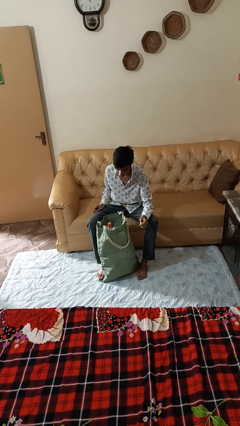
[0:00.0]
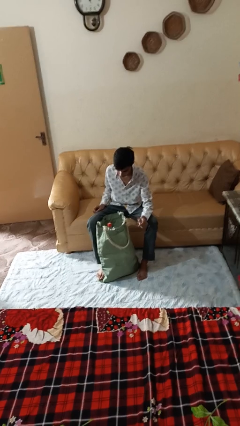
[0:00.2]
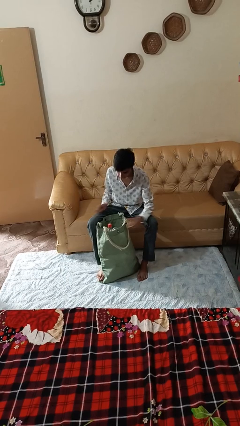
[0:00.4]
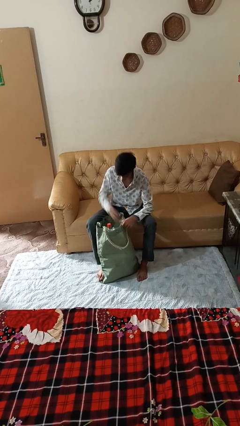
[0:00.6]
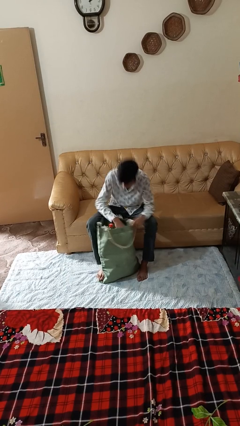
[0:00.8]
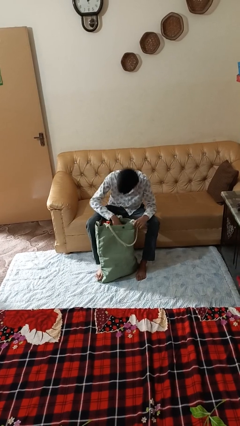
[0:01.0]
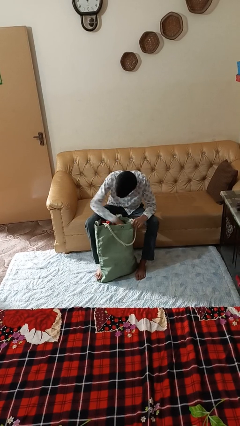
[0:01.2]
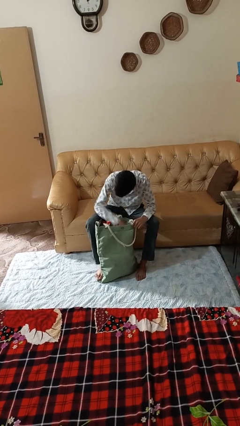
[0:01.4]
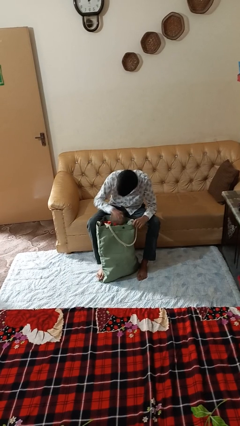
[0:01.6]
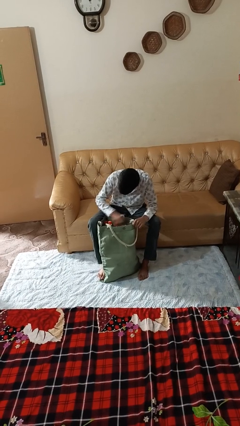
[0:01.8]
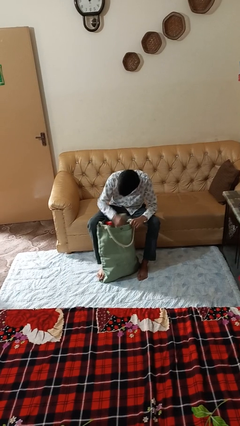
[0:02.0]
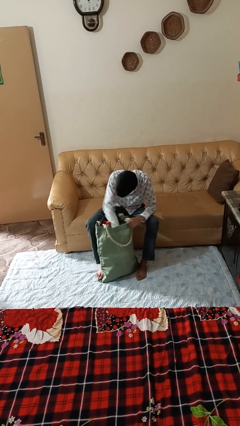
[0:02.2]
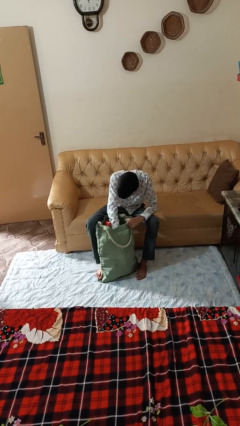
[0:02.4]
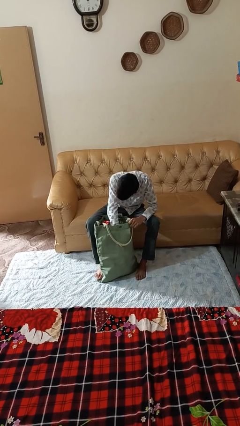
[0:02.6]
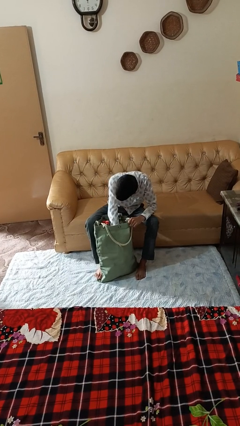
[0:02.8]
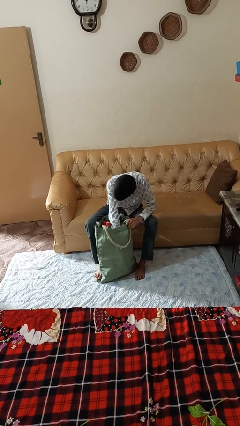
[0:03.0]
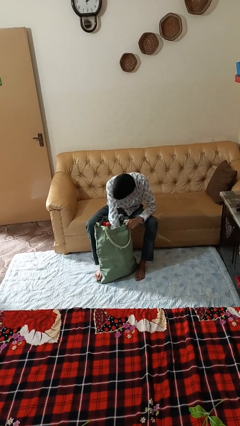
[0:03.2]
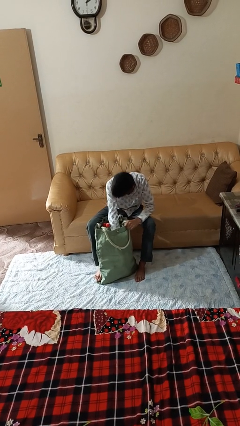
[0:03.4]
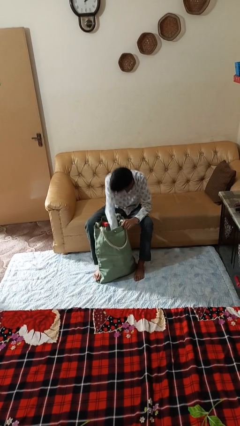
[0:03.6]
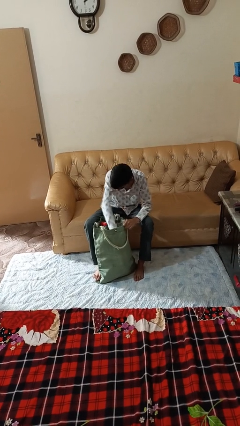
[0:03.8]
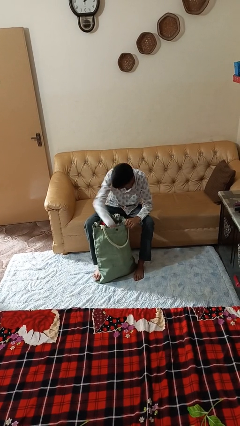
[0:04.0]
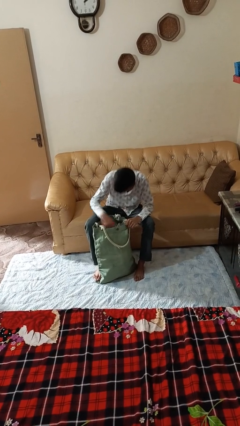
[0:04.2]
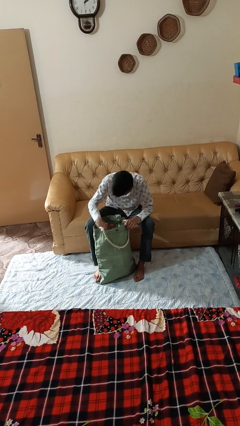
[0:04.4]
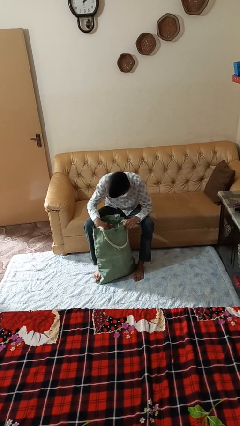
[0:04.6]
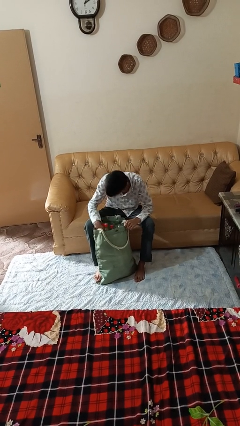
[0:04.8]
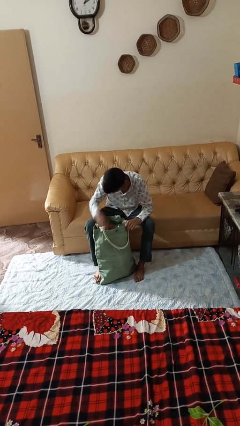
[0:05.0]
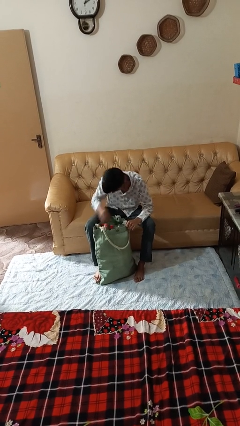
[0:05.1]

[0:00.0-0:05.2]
person searches in bag

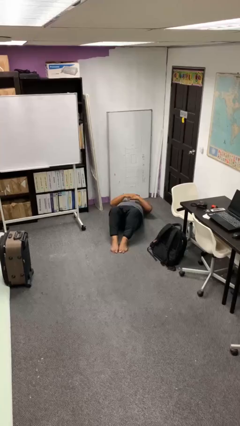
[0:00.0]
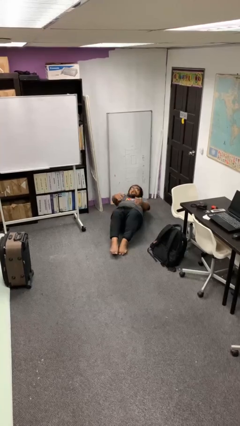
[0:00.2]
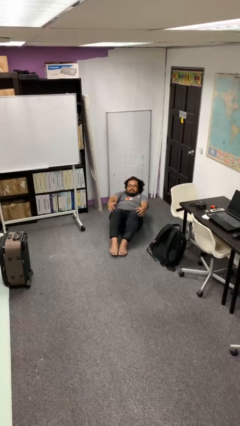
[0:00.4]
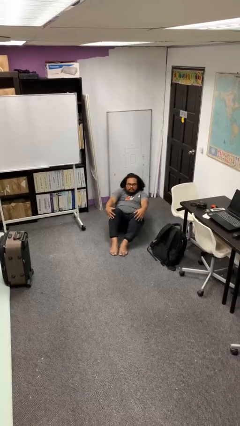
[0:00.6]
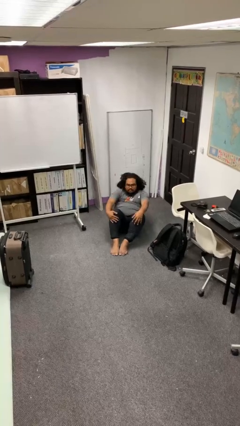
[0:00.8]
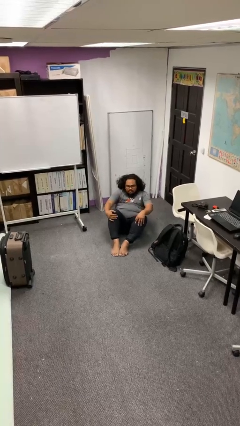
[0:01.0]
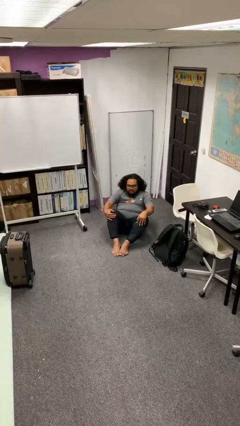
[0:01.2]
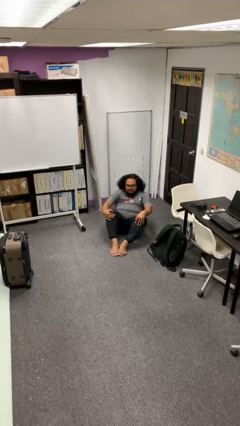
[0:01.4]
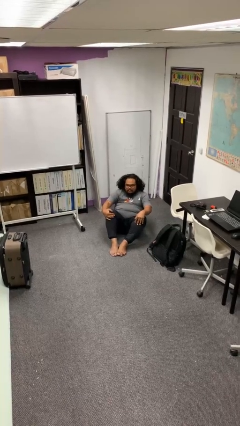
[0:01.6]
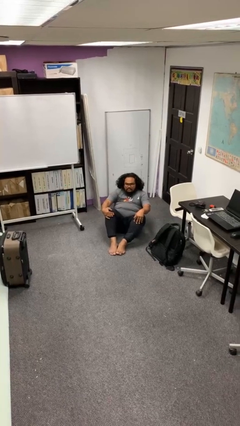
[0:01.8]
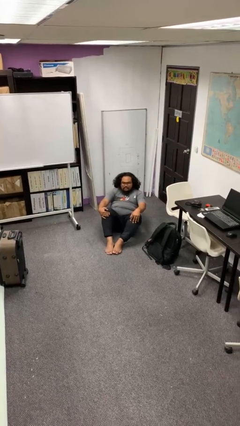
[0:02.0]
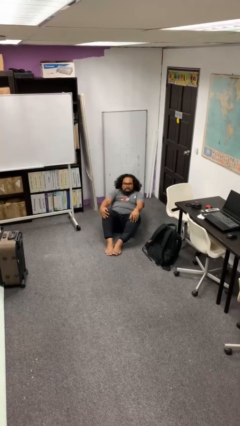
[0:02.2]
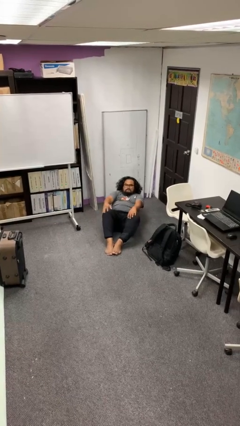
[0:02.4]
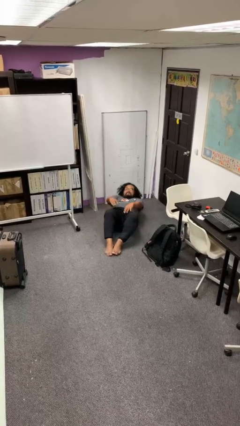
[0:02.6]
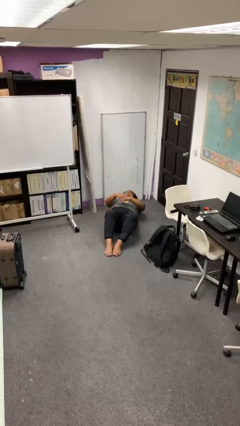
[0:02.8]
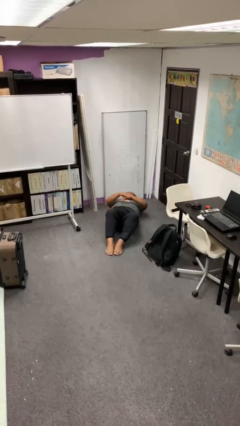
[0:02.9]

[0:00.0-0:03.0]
person exercises with situp

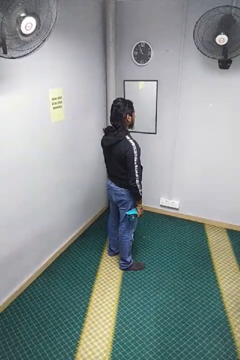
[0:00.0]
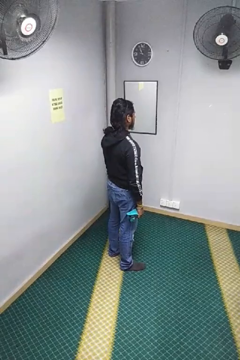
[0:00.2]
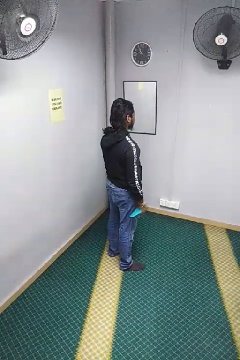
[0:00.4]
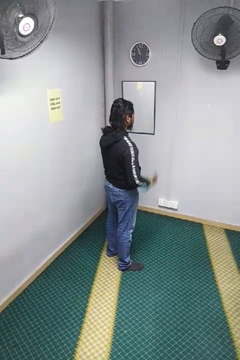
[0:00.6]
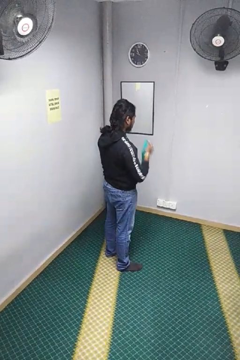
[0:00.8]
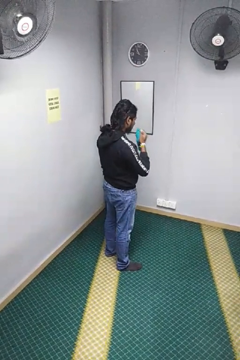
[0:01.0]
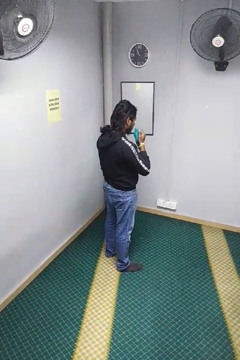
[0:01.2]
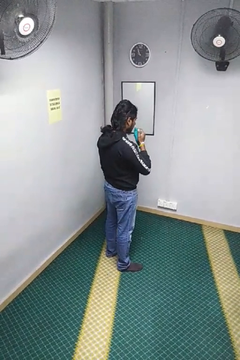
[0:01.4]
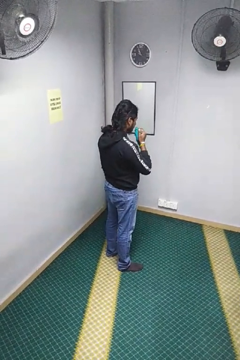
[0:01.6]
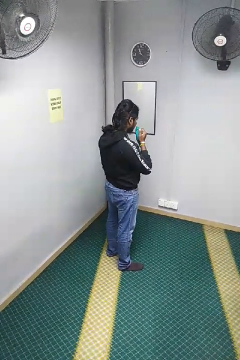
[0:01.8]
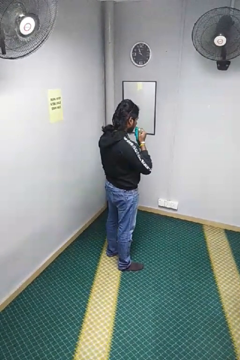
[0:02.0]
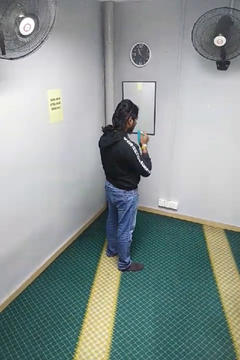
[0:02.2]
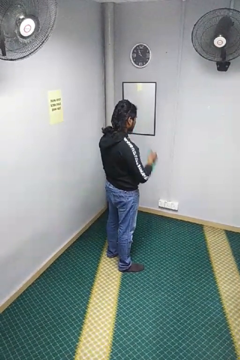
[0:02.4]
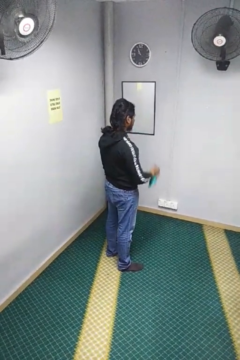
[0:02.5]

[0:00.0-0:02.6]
person wipes mouth with napkin

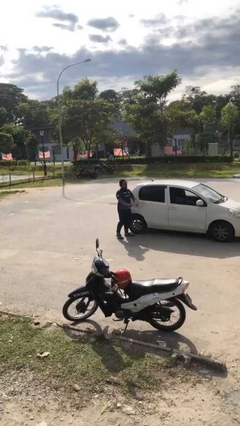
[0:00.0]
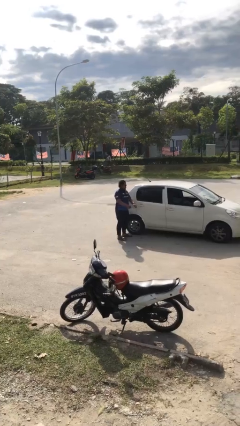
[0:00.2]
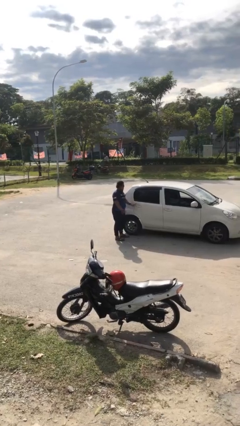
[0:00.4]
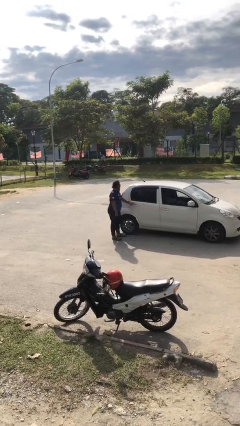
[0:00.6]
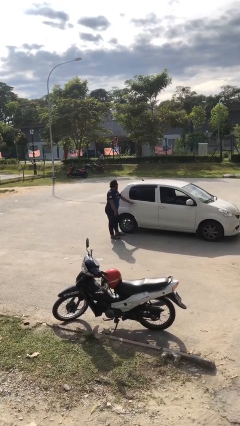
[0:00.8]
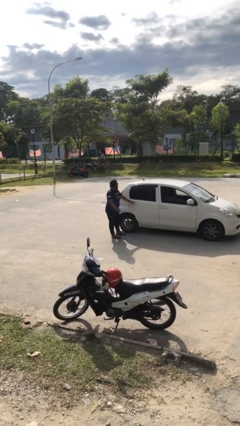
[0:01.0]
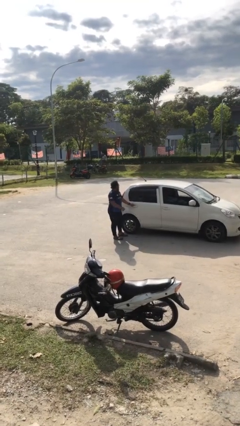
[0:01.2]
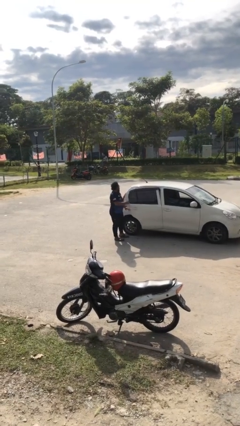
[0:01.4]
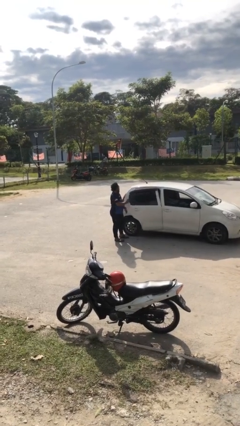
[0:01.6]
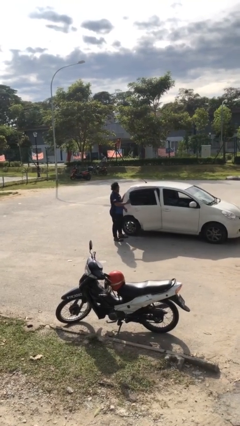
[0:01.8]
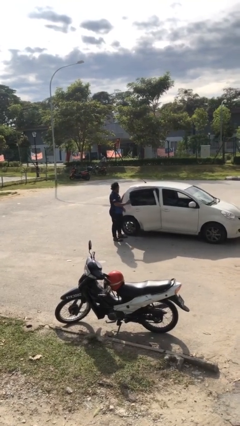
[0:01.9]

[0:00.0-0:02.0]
person opens car door

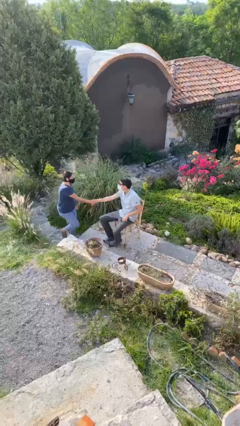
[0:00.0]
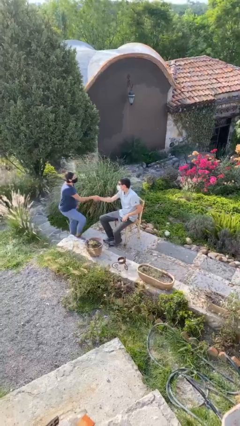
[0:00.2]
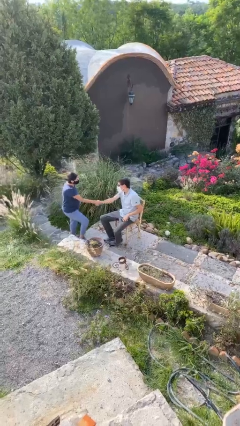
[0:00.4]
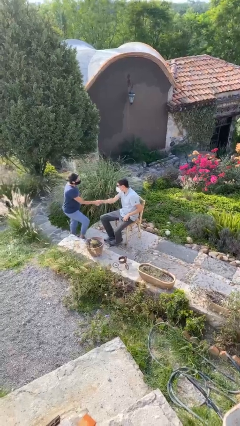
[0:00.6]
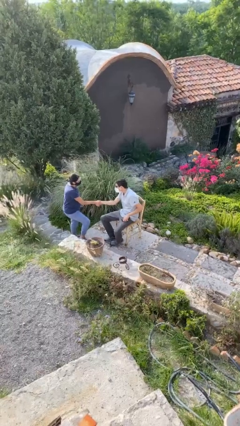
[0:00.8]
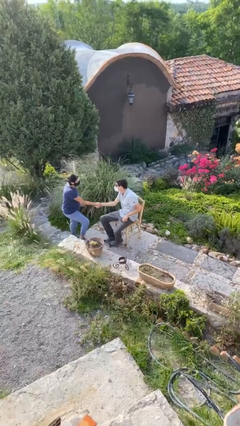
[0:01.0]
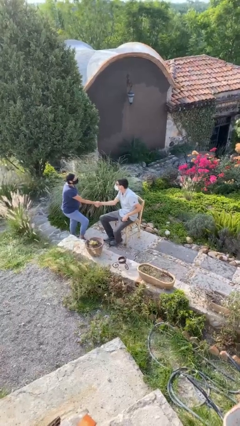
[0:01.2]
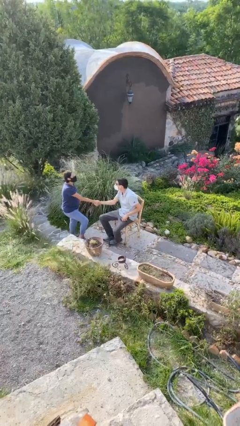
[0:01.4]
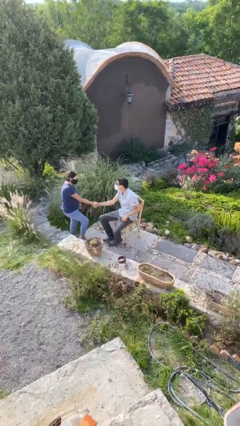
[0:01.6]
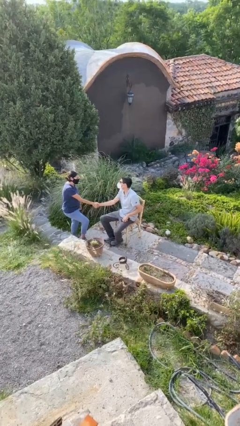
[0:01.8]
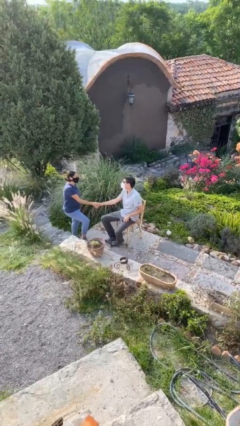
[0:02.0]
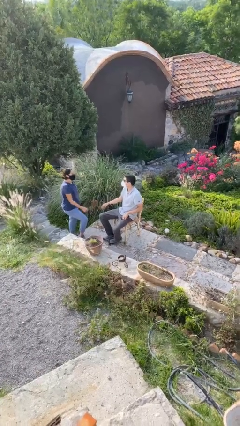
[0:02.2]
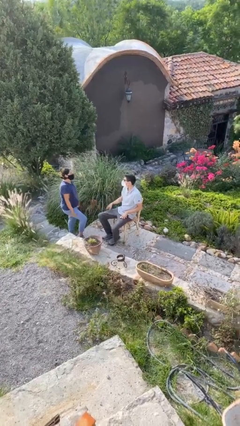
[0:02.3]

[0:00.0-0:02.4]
person shakes hand

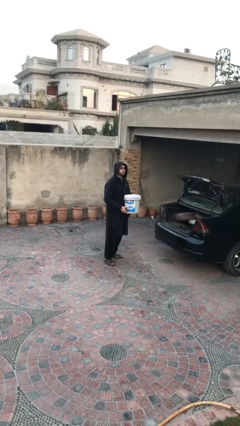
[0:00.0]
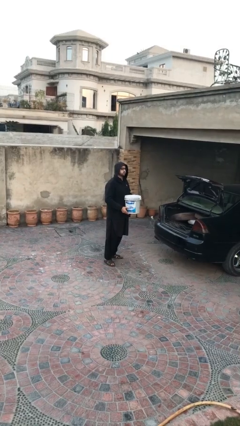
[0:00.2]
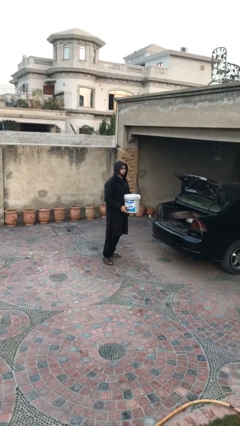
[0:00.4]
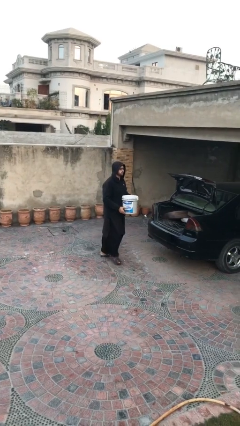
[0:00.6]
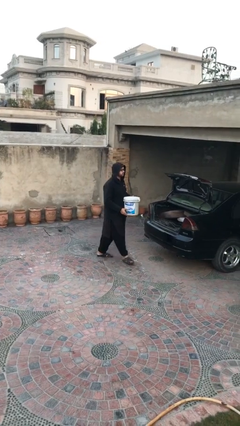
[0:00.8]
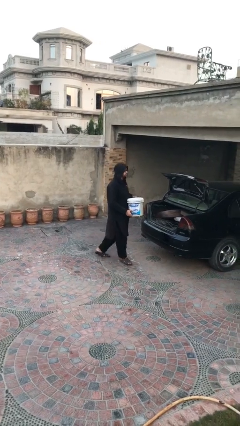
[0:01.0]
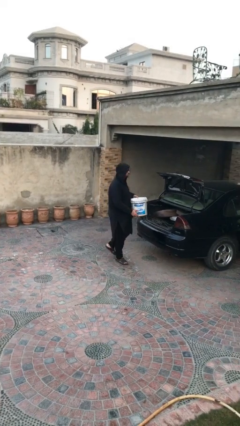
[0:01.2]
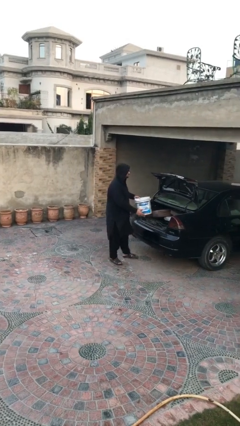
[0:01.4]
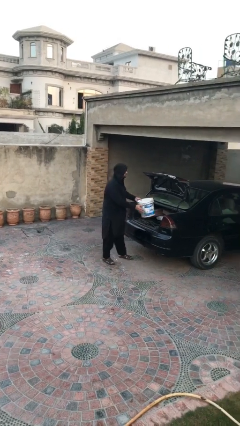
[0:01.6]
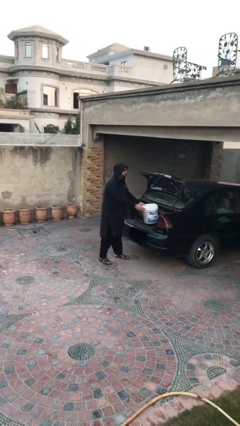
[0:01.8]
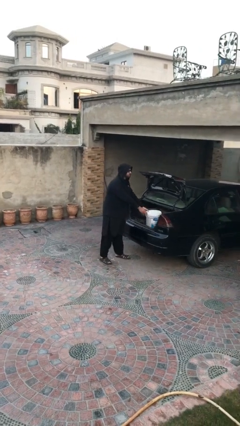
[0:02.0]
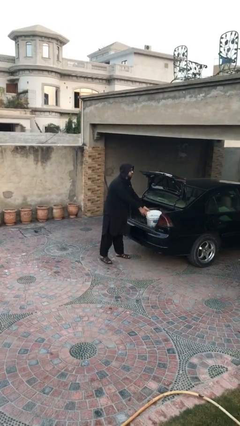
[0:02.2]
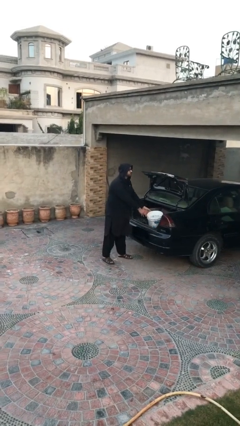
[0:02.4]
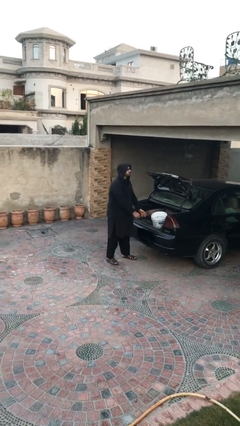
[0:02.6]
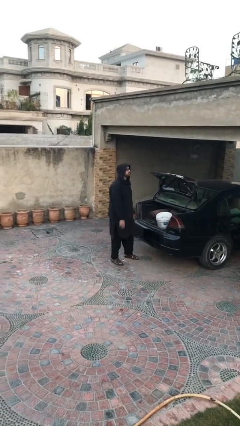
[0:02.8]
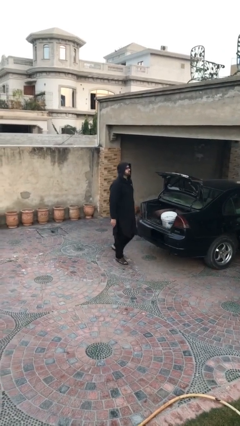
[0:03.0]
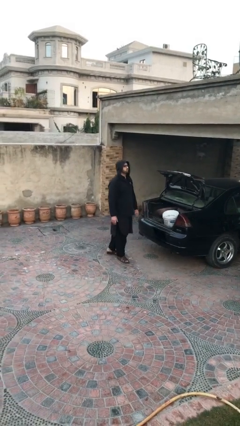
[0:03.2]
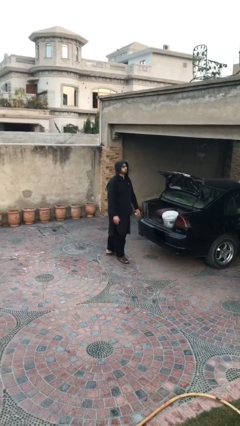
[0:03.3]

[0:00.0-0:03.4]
person loads car
